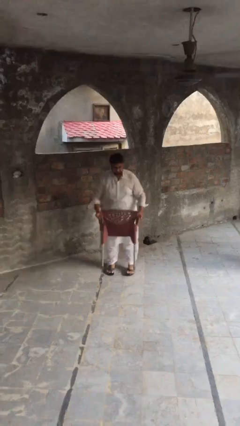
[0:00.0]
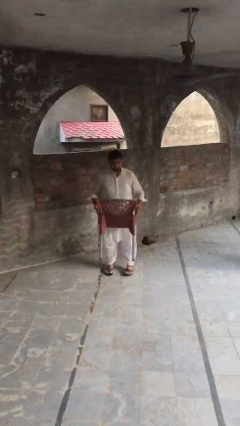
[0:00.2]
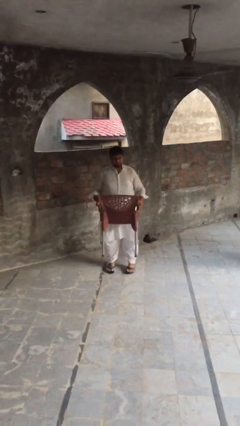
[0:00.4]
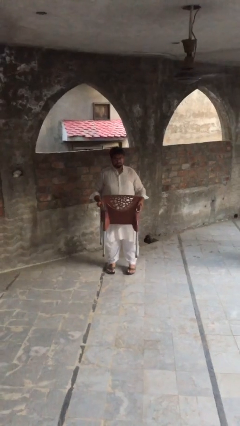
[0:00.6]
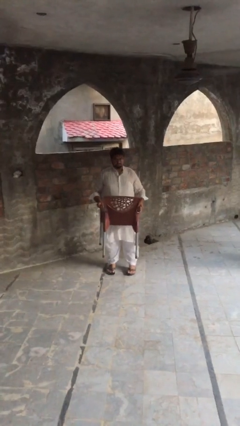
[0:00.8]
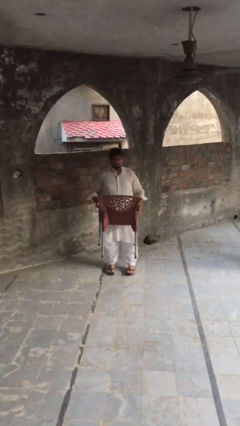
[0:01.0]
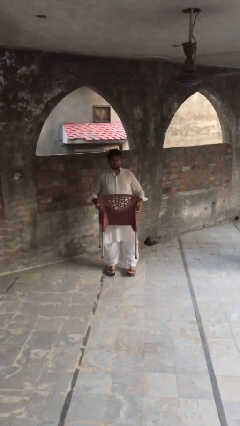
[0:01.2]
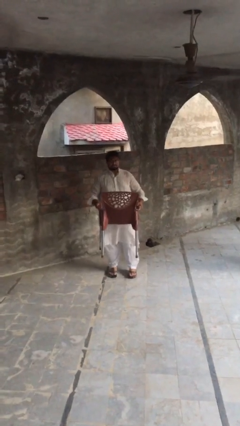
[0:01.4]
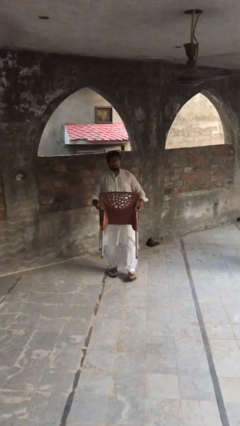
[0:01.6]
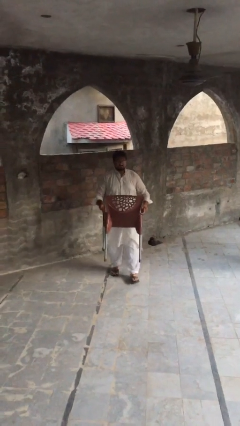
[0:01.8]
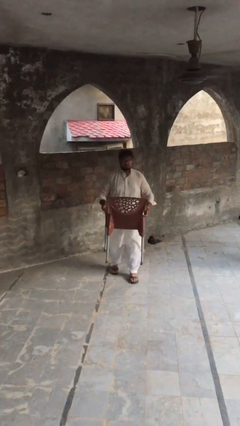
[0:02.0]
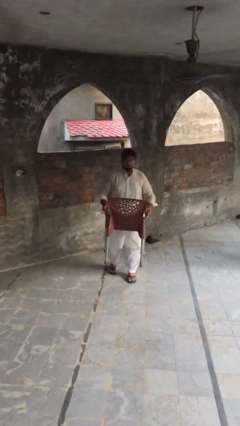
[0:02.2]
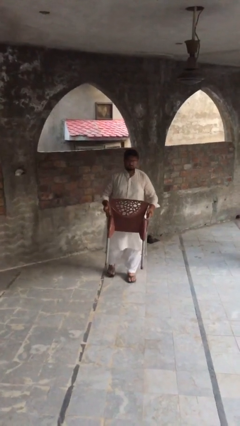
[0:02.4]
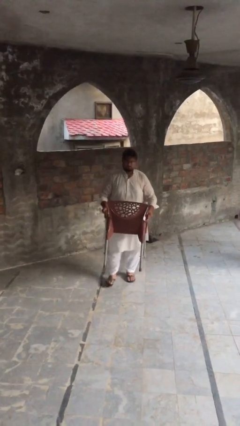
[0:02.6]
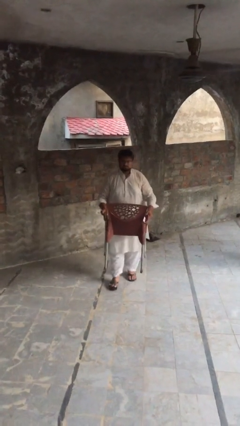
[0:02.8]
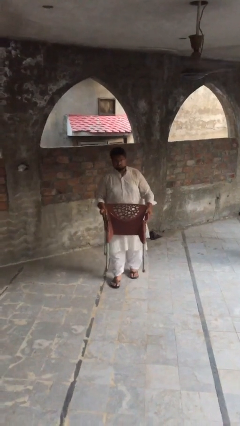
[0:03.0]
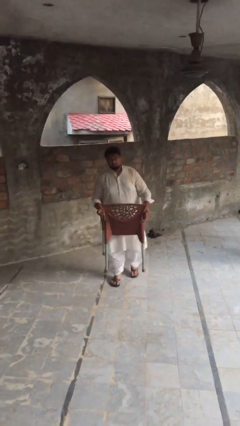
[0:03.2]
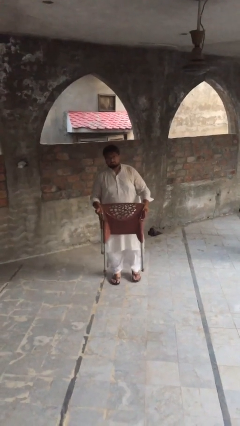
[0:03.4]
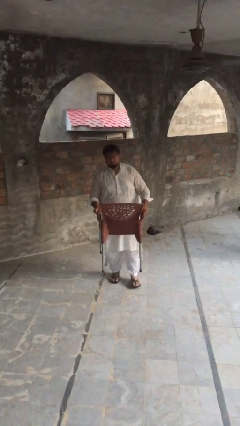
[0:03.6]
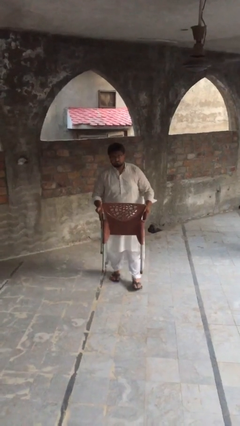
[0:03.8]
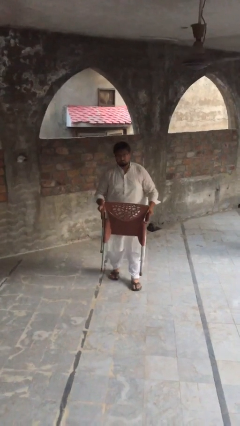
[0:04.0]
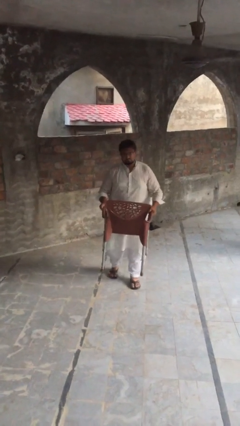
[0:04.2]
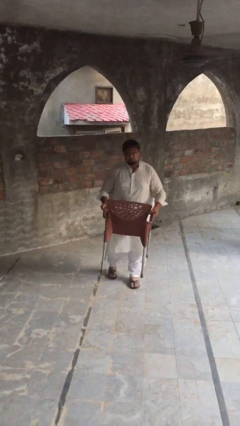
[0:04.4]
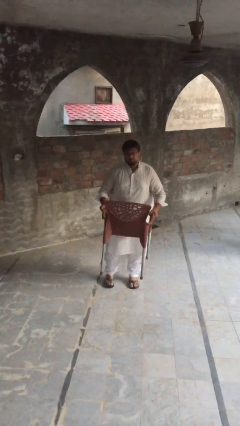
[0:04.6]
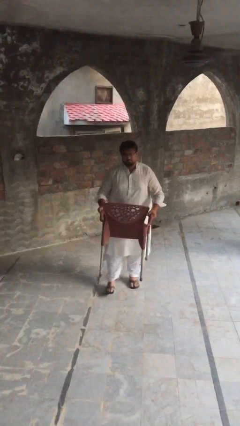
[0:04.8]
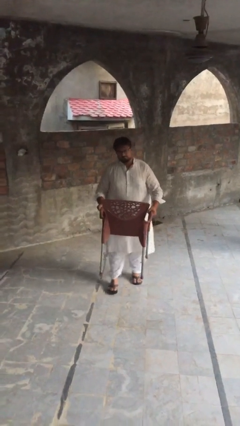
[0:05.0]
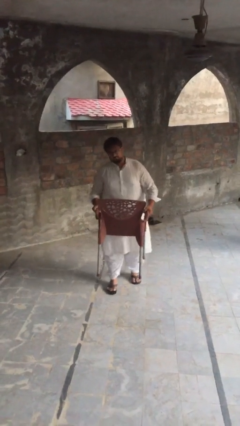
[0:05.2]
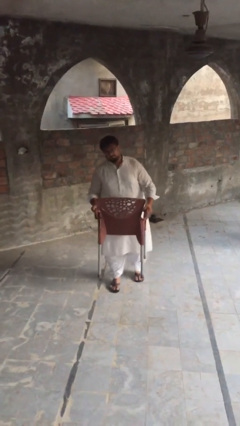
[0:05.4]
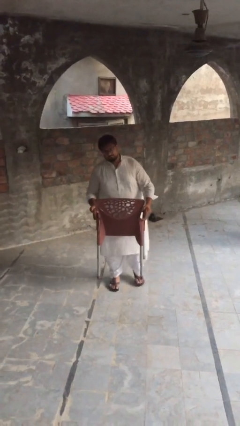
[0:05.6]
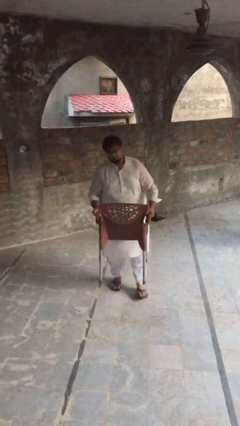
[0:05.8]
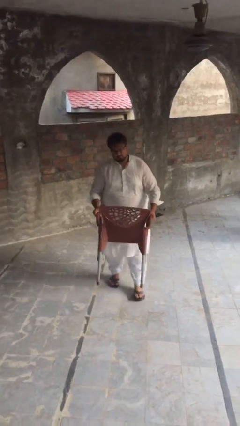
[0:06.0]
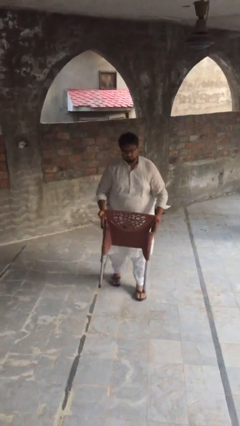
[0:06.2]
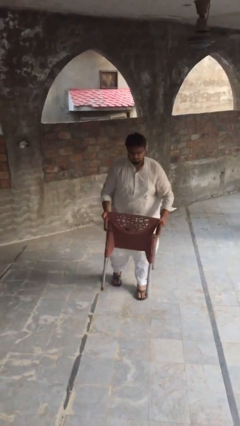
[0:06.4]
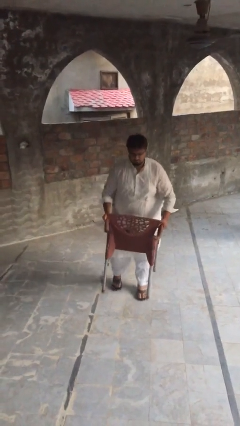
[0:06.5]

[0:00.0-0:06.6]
person carries heavy object

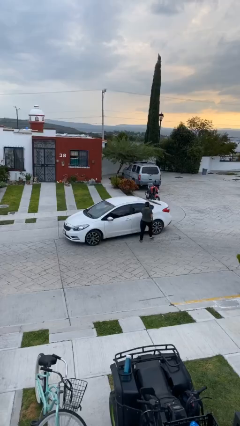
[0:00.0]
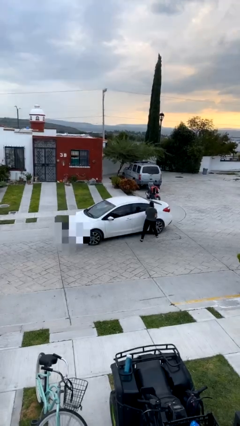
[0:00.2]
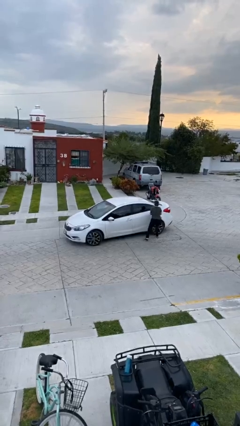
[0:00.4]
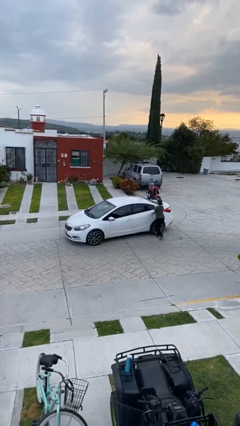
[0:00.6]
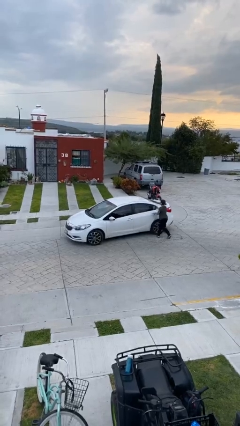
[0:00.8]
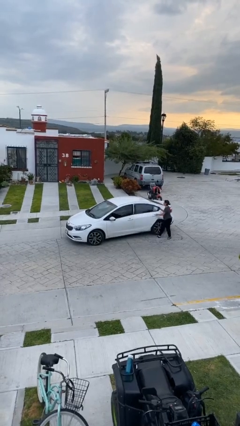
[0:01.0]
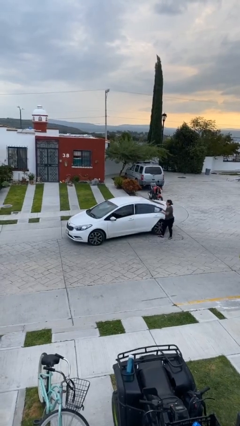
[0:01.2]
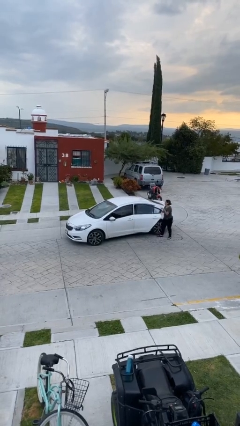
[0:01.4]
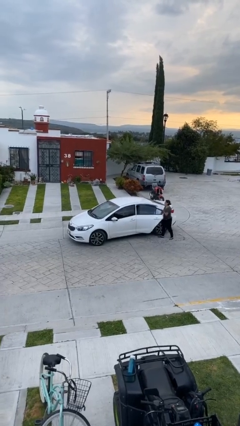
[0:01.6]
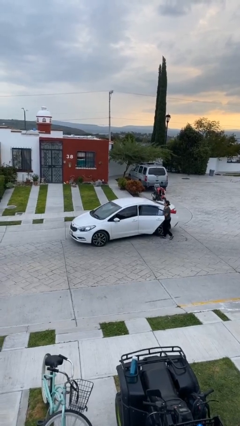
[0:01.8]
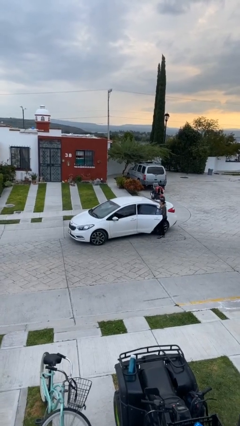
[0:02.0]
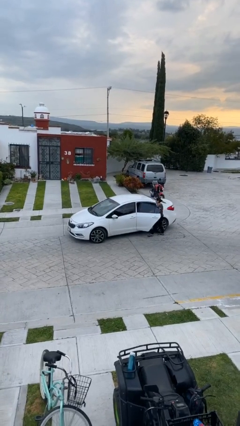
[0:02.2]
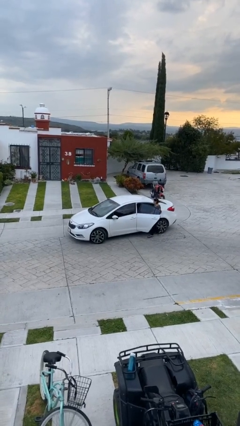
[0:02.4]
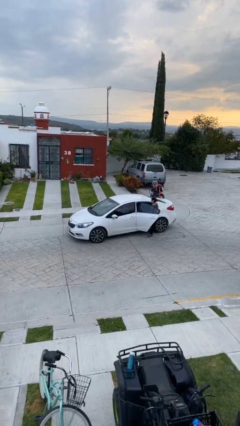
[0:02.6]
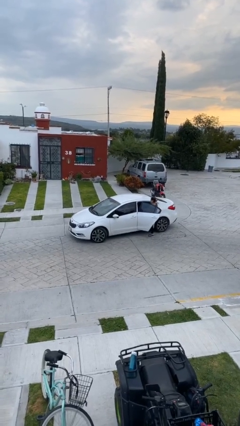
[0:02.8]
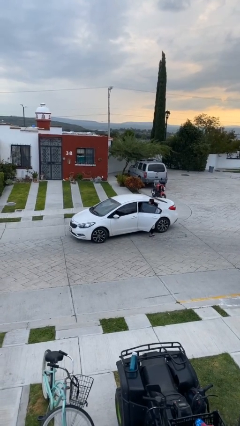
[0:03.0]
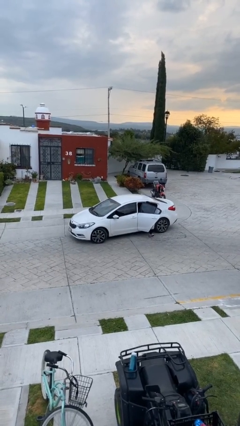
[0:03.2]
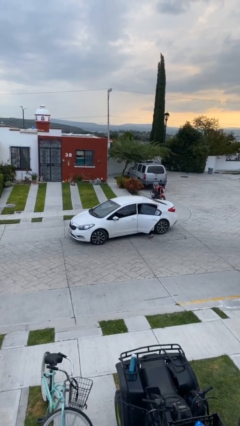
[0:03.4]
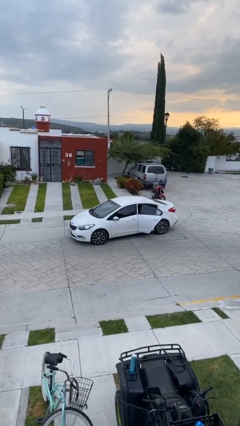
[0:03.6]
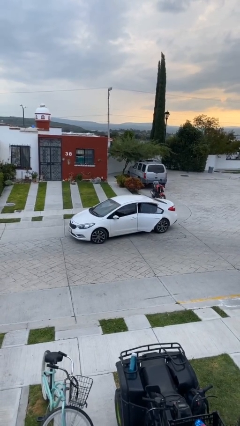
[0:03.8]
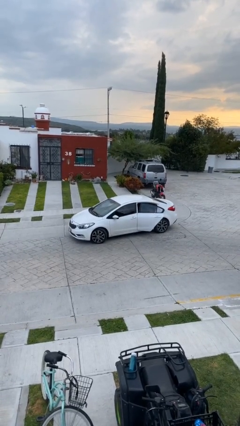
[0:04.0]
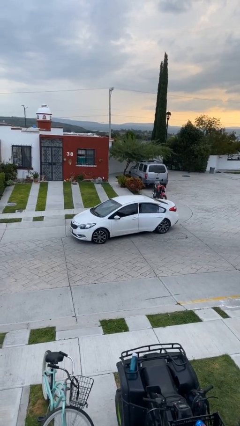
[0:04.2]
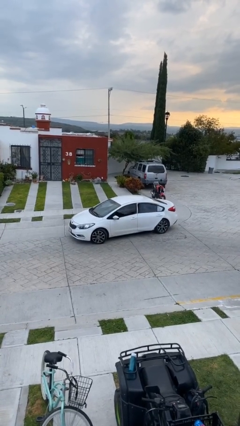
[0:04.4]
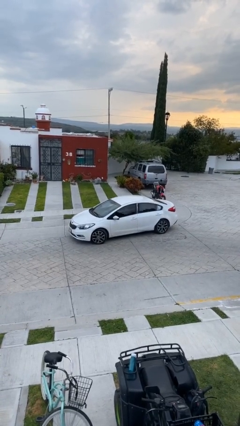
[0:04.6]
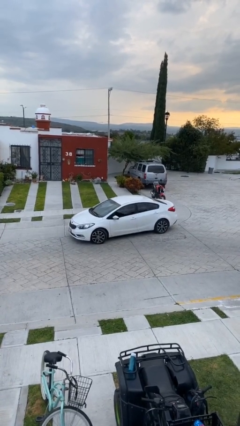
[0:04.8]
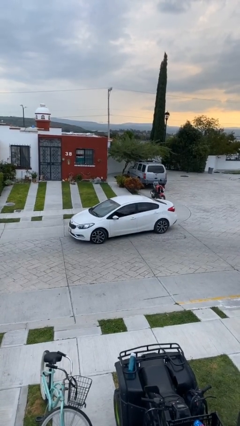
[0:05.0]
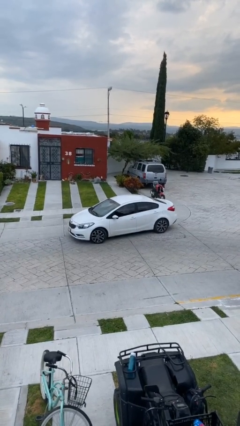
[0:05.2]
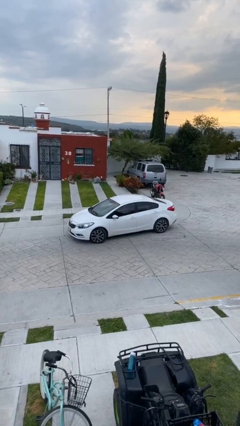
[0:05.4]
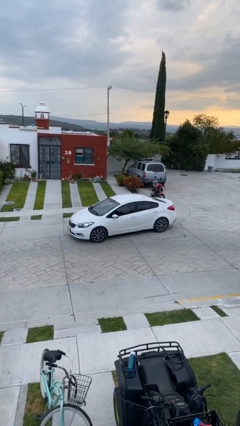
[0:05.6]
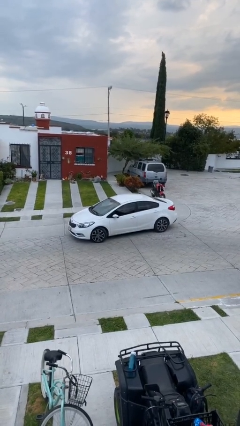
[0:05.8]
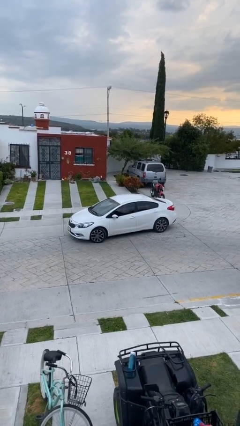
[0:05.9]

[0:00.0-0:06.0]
car picks up person

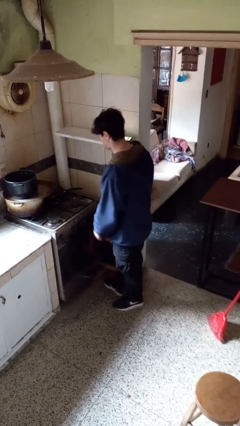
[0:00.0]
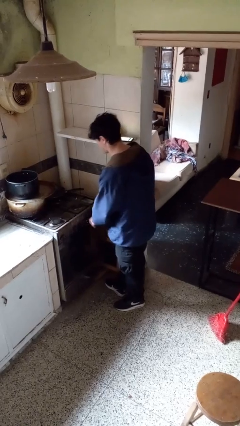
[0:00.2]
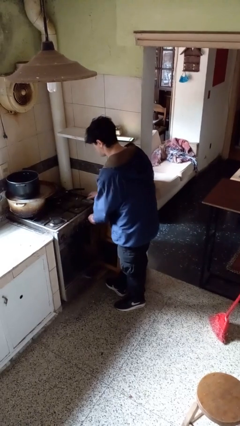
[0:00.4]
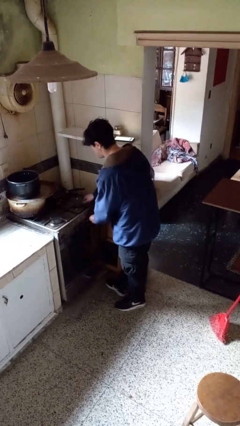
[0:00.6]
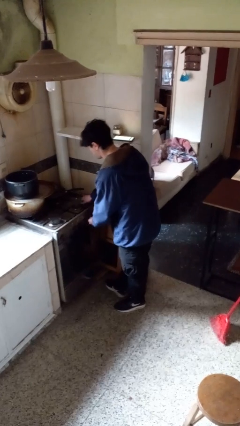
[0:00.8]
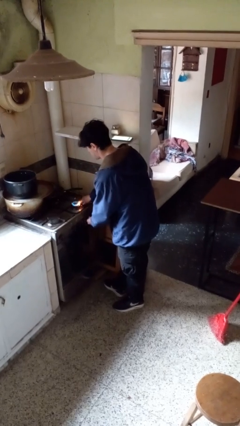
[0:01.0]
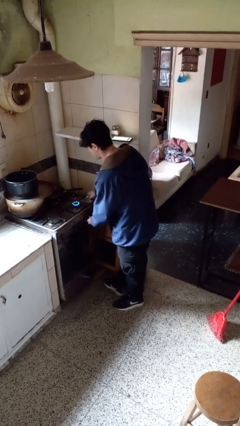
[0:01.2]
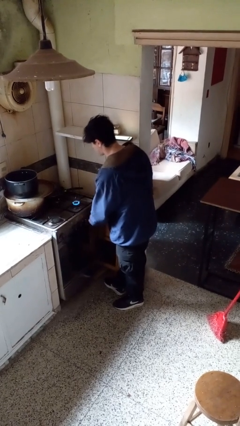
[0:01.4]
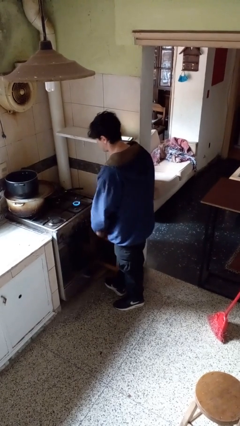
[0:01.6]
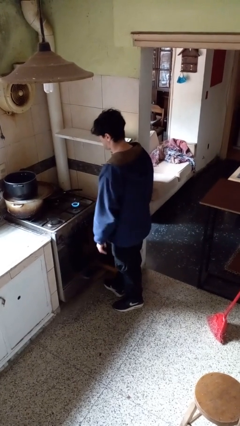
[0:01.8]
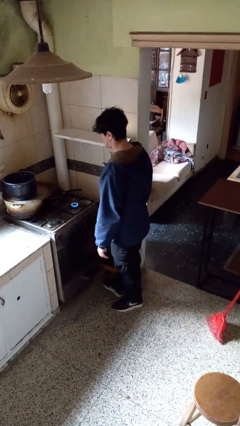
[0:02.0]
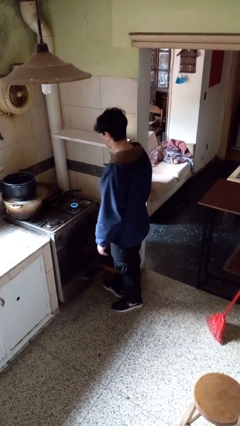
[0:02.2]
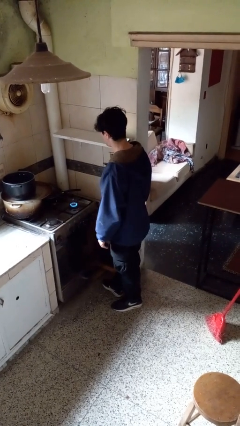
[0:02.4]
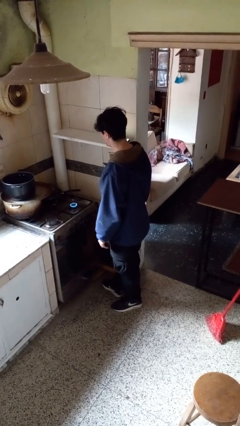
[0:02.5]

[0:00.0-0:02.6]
person turns on stovetop

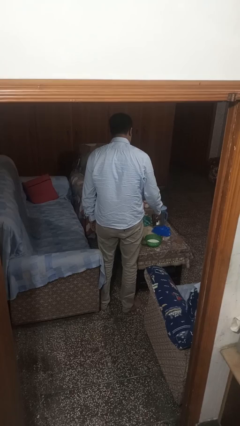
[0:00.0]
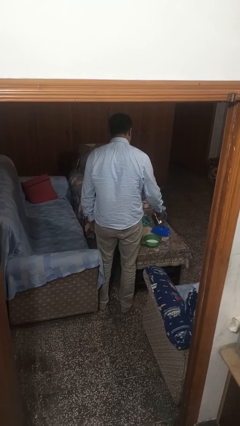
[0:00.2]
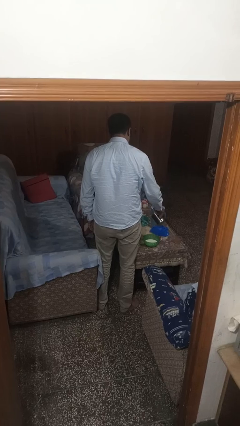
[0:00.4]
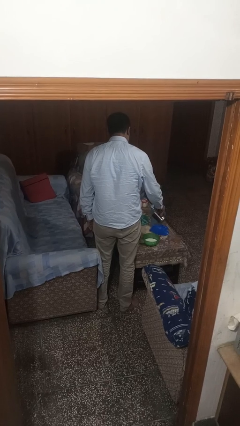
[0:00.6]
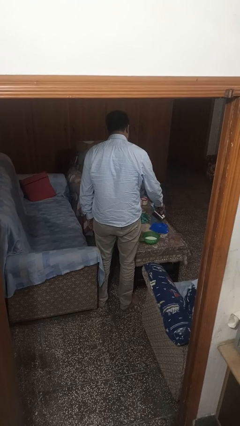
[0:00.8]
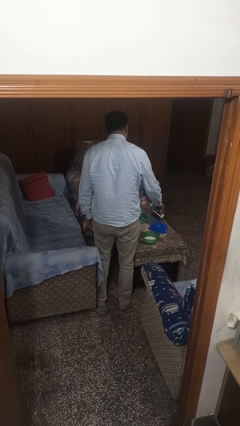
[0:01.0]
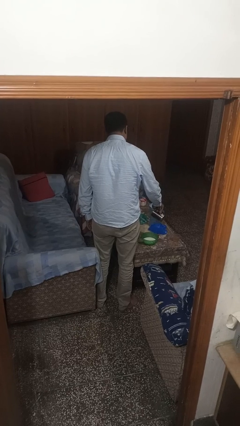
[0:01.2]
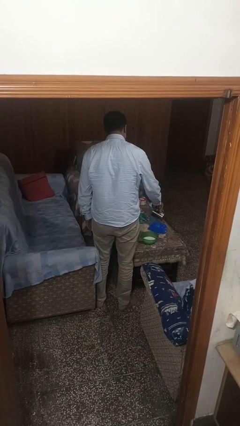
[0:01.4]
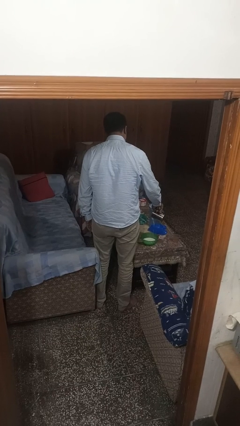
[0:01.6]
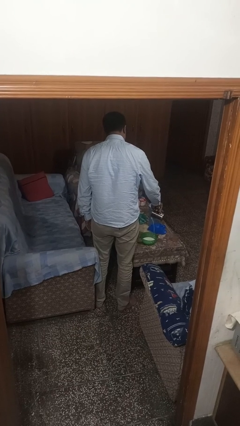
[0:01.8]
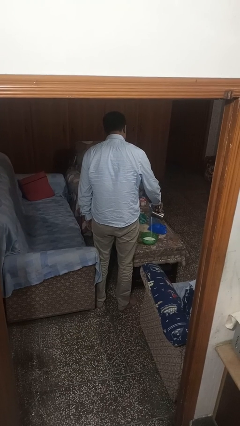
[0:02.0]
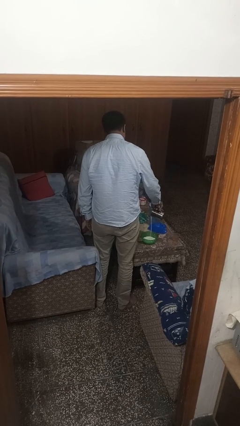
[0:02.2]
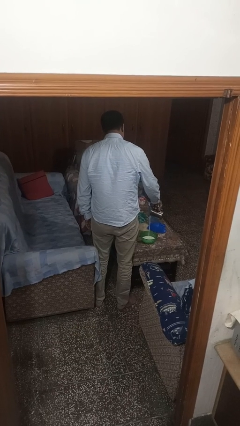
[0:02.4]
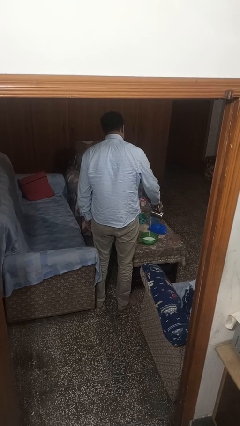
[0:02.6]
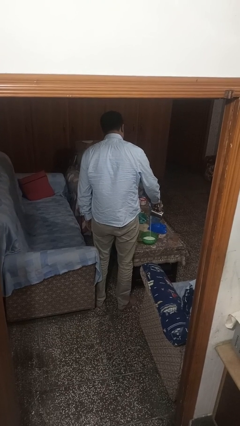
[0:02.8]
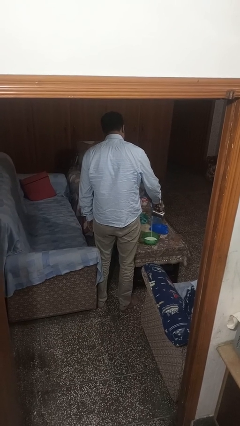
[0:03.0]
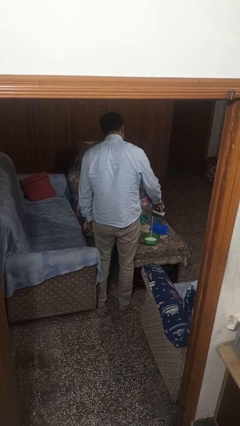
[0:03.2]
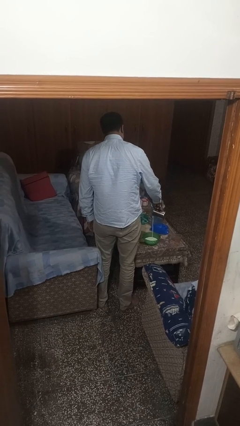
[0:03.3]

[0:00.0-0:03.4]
person pours into bowl
